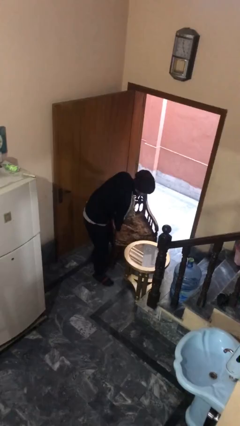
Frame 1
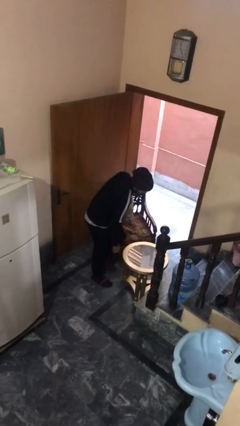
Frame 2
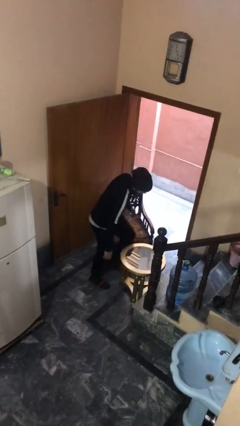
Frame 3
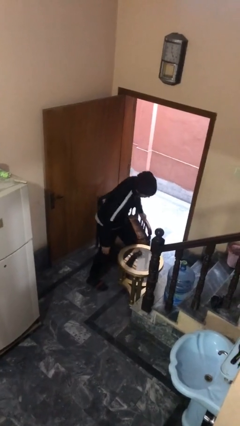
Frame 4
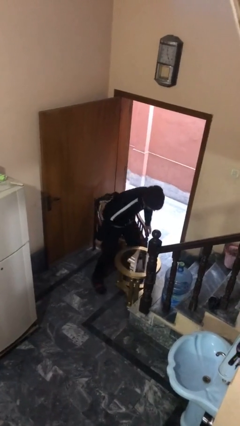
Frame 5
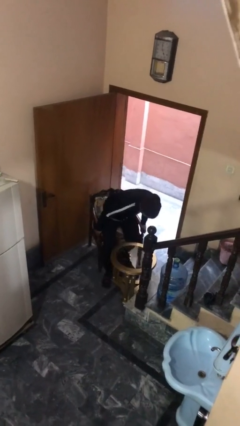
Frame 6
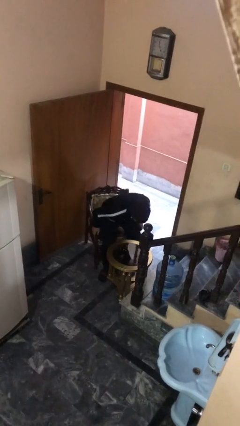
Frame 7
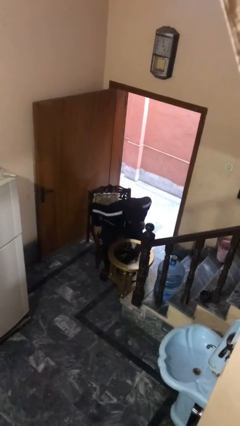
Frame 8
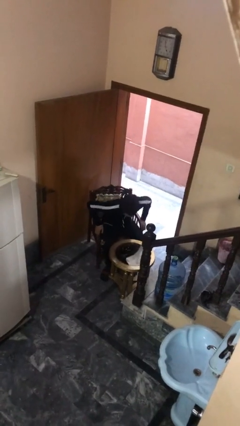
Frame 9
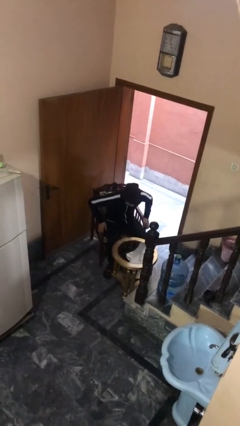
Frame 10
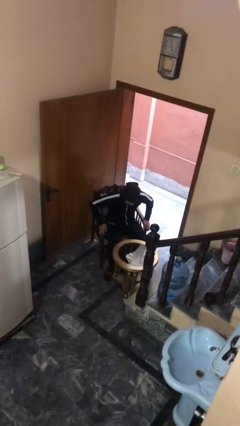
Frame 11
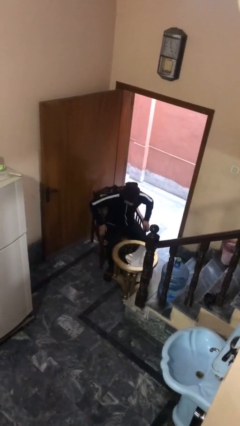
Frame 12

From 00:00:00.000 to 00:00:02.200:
person sits down

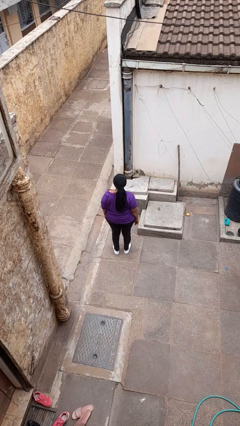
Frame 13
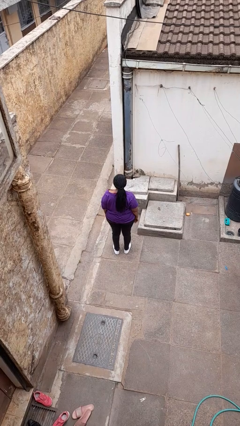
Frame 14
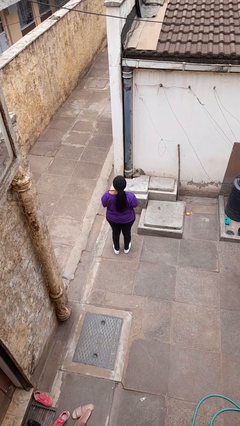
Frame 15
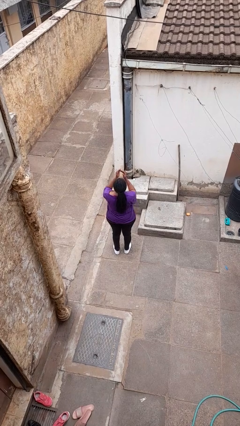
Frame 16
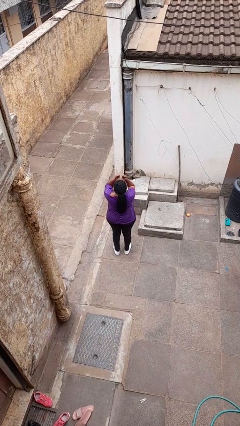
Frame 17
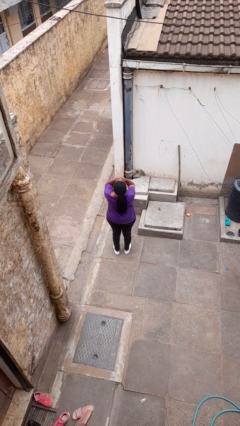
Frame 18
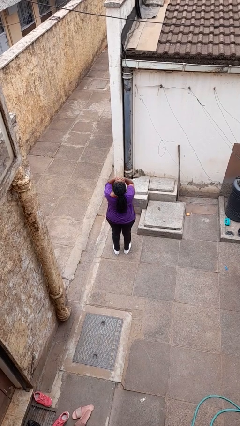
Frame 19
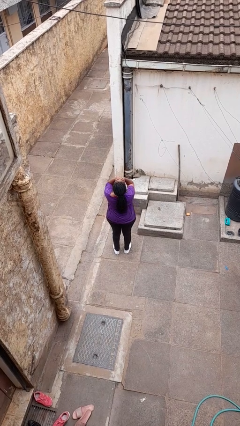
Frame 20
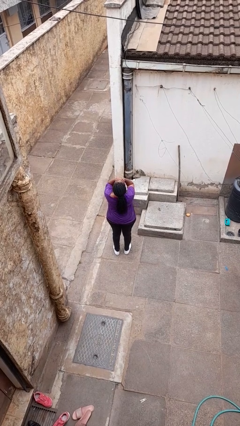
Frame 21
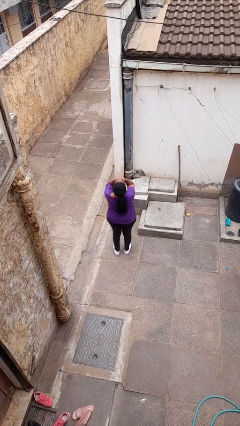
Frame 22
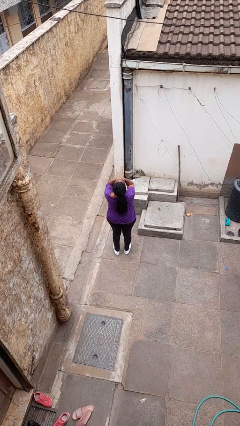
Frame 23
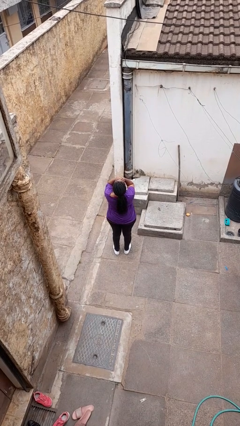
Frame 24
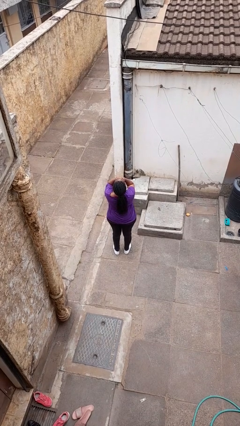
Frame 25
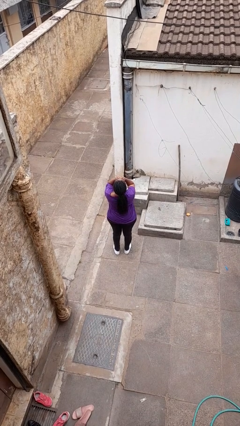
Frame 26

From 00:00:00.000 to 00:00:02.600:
person covers face with hands

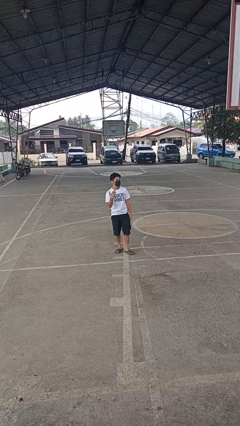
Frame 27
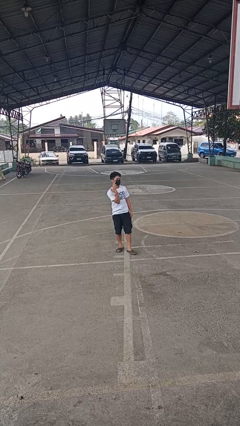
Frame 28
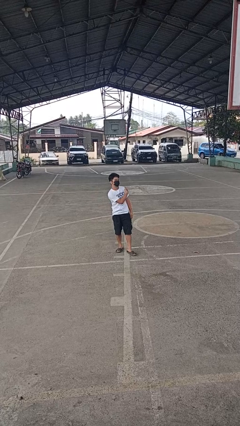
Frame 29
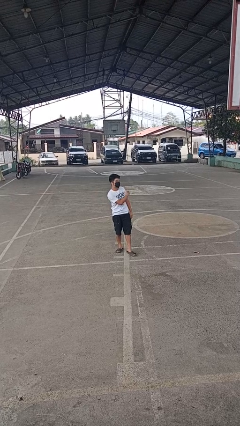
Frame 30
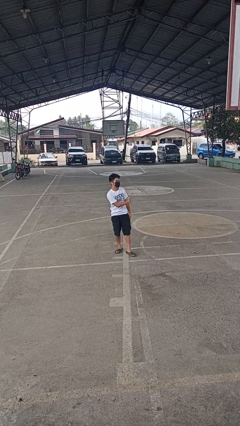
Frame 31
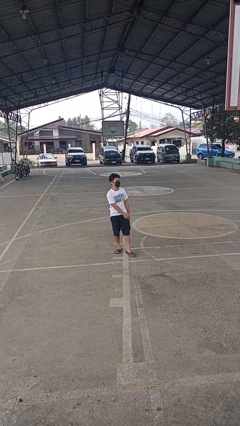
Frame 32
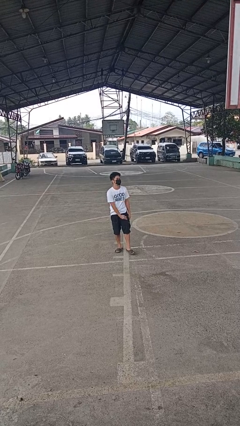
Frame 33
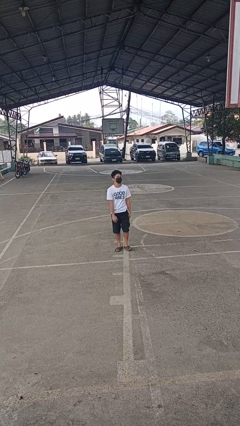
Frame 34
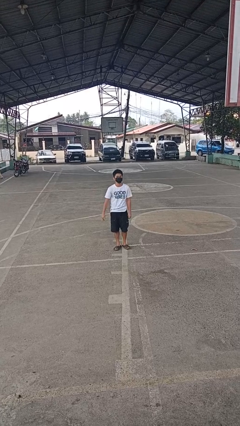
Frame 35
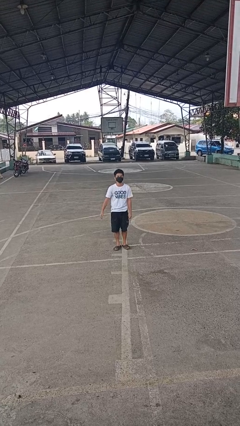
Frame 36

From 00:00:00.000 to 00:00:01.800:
person gestures cut

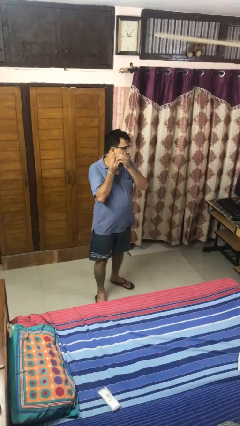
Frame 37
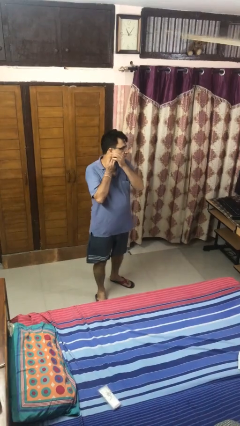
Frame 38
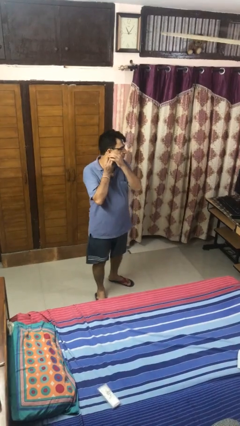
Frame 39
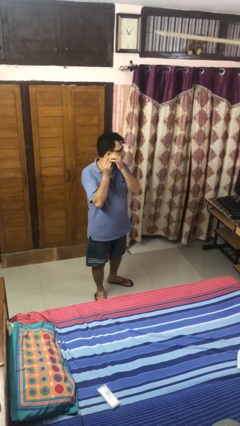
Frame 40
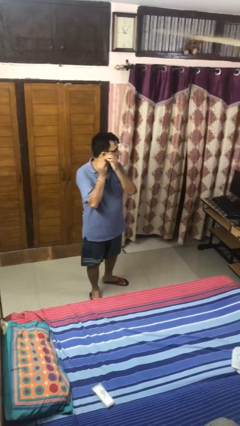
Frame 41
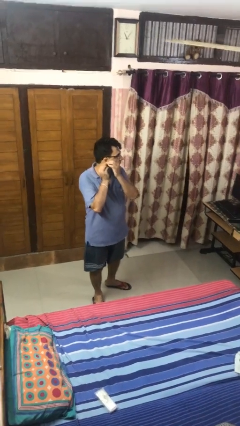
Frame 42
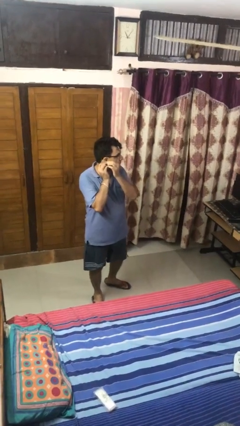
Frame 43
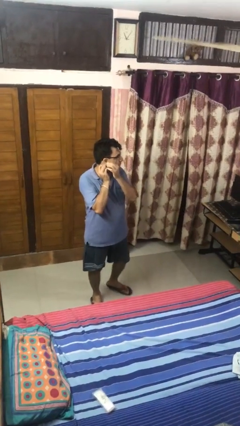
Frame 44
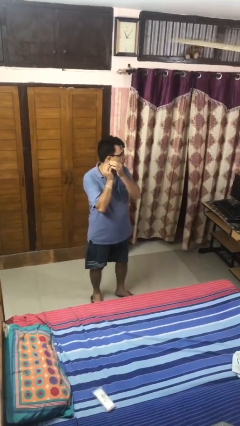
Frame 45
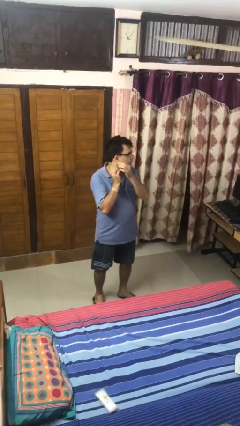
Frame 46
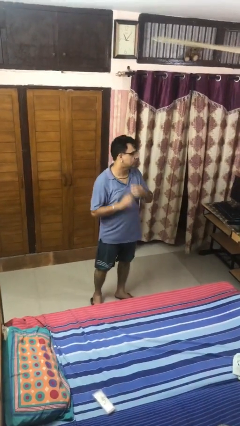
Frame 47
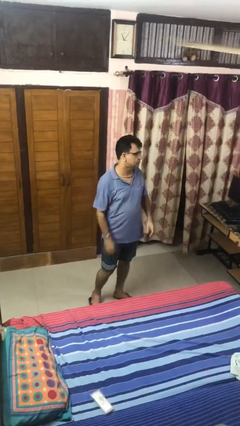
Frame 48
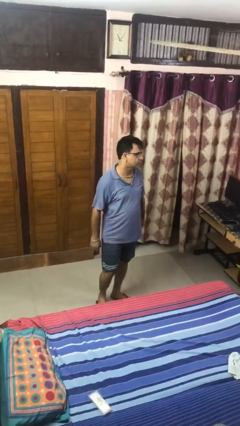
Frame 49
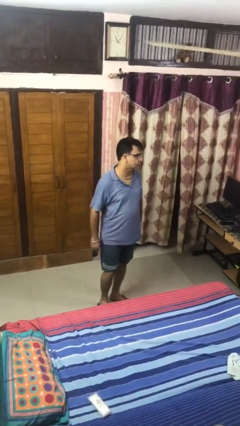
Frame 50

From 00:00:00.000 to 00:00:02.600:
person puts on earrings

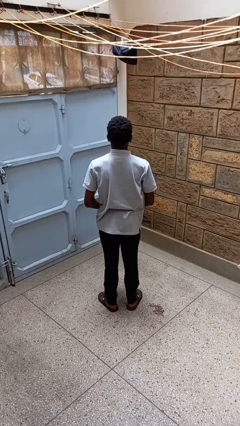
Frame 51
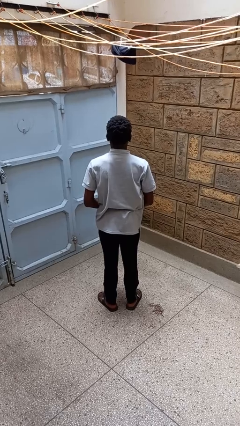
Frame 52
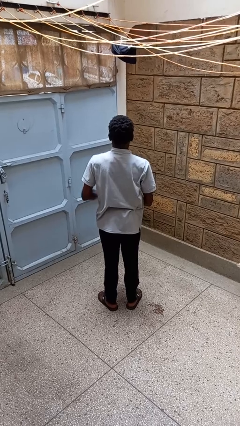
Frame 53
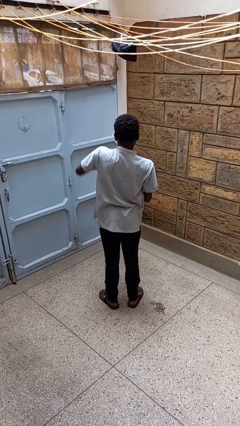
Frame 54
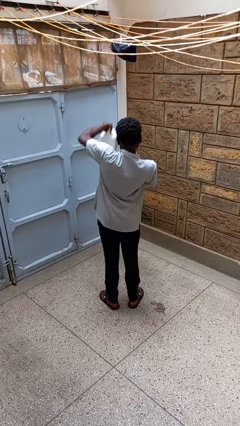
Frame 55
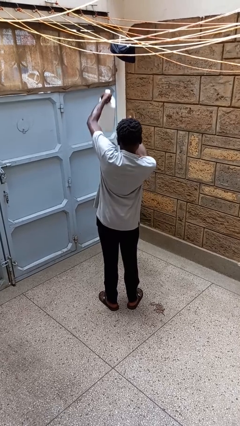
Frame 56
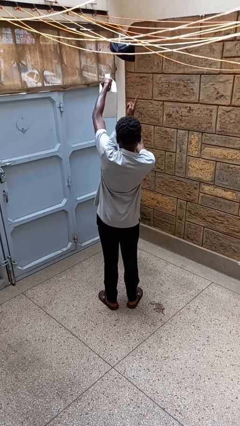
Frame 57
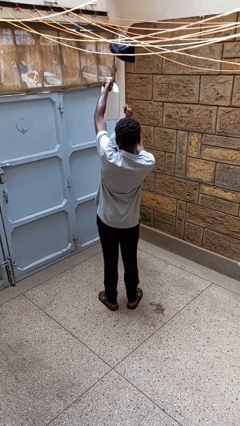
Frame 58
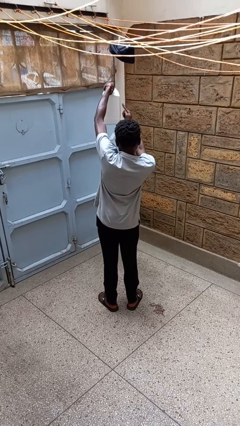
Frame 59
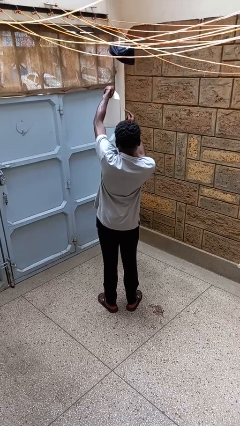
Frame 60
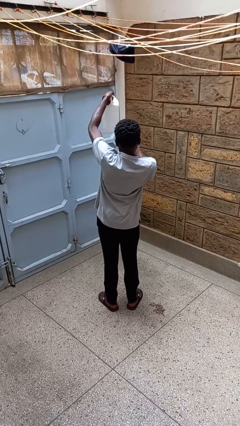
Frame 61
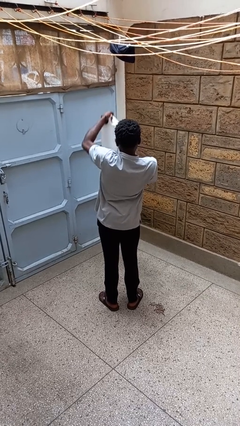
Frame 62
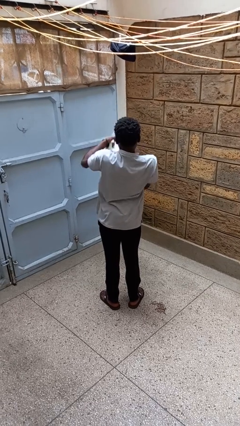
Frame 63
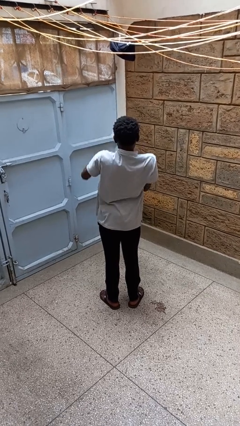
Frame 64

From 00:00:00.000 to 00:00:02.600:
person taps object with finger

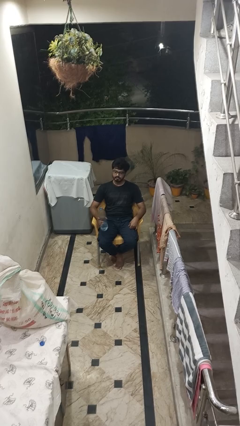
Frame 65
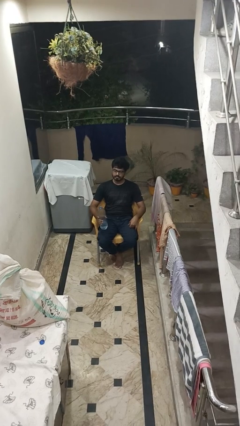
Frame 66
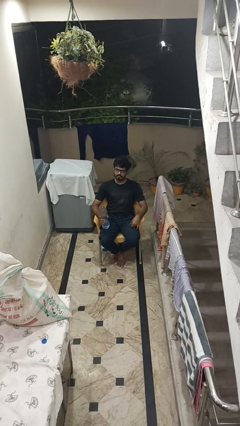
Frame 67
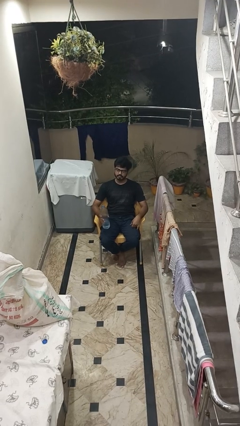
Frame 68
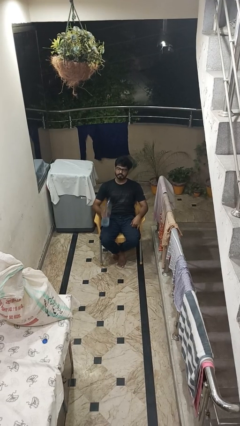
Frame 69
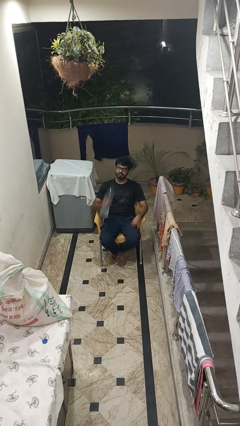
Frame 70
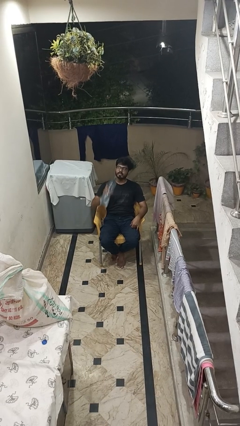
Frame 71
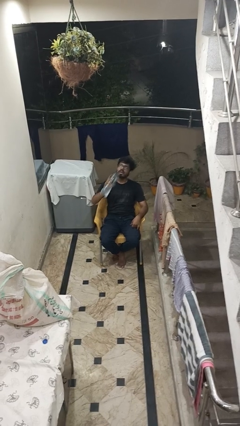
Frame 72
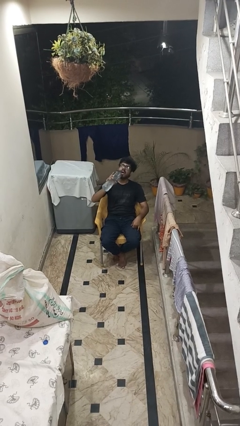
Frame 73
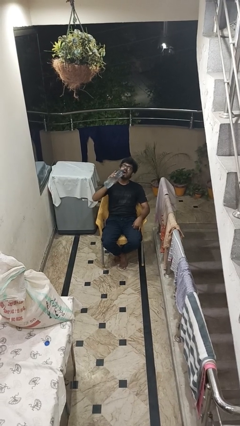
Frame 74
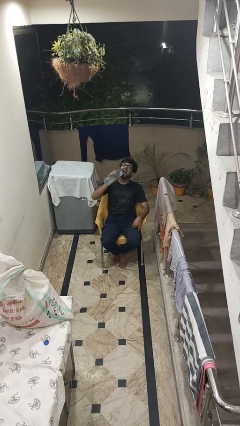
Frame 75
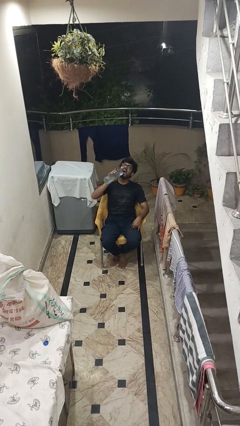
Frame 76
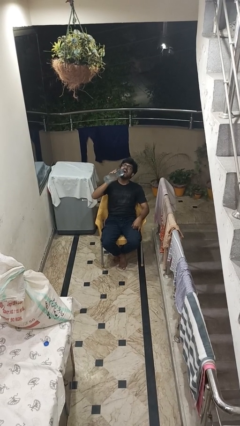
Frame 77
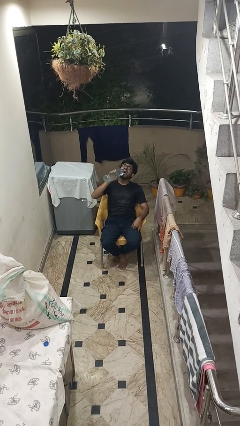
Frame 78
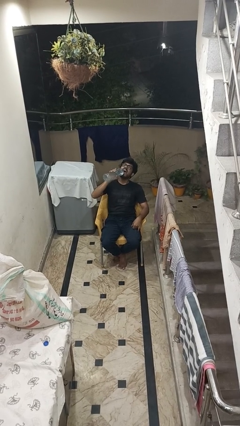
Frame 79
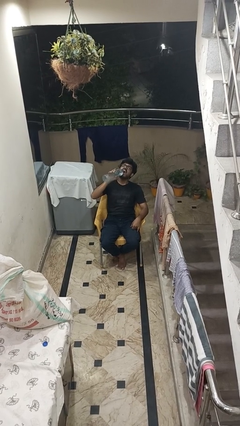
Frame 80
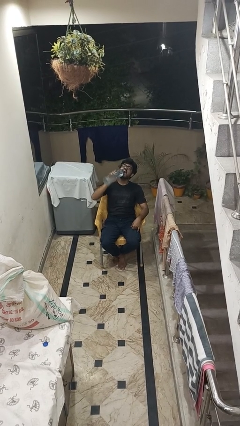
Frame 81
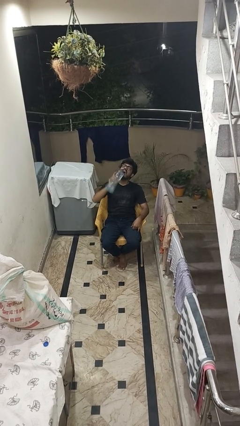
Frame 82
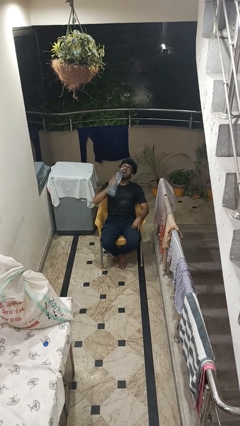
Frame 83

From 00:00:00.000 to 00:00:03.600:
person drinks from bottle

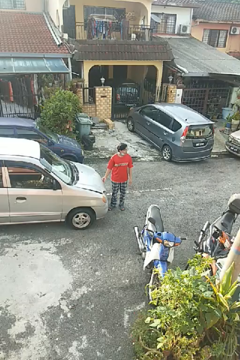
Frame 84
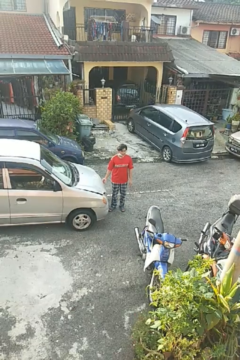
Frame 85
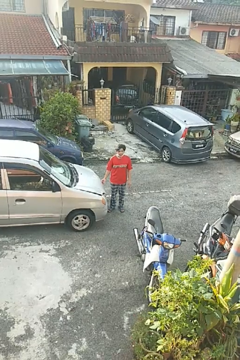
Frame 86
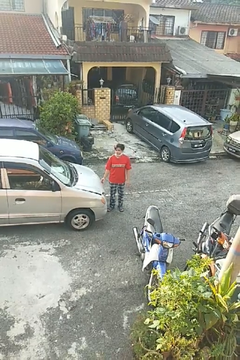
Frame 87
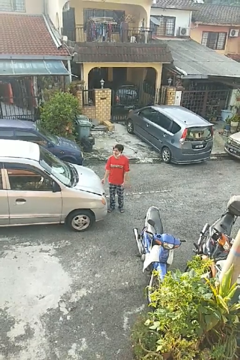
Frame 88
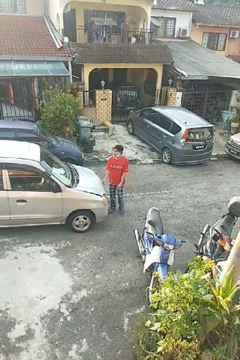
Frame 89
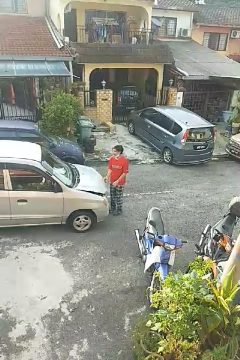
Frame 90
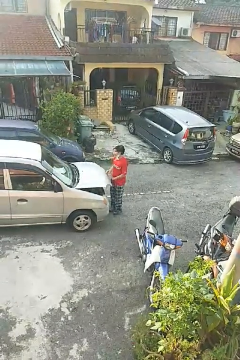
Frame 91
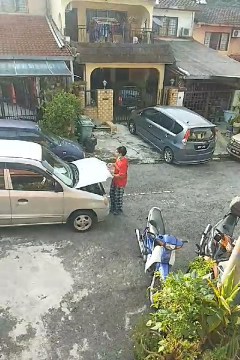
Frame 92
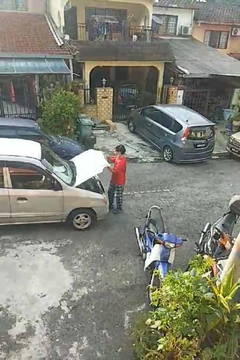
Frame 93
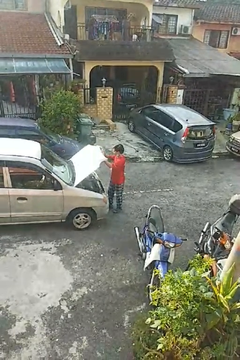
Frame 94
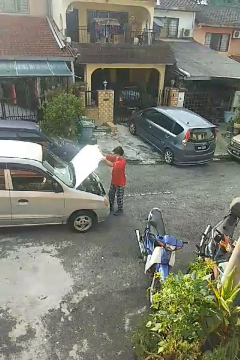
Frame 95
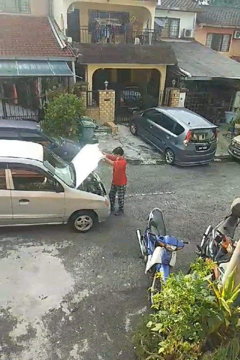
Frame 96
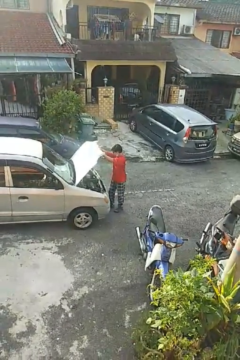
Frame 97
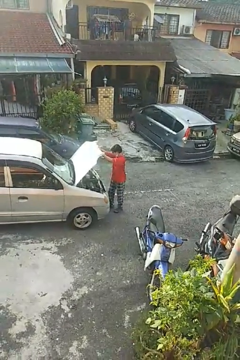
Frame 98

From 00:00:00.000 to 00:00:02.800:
person opens car hood
